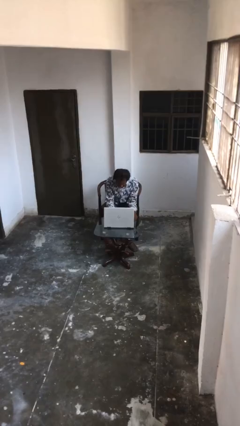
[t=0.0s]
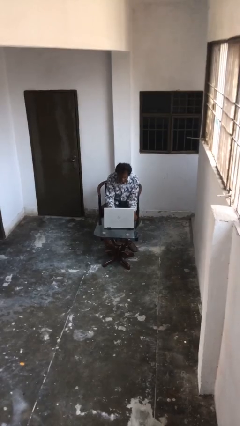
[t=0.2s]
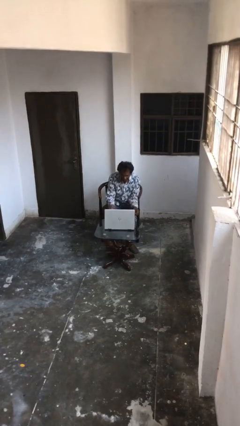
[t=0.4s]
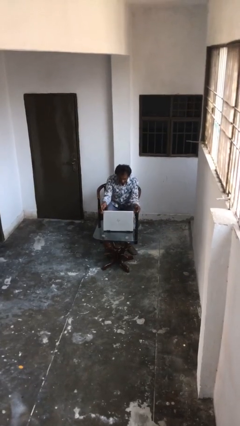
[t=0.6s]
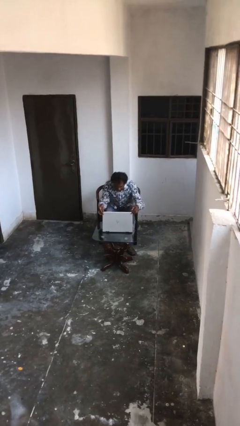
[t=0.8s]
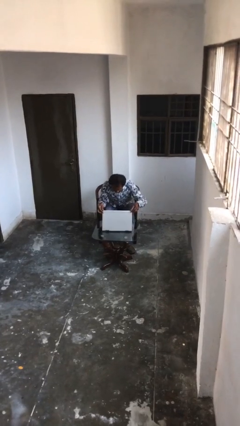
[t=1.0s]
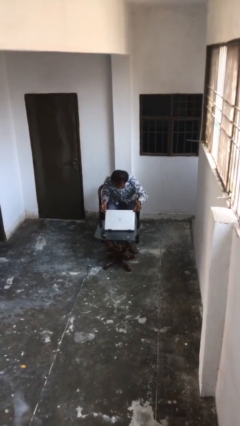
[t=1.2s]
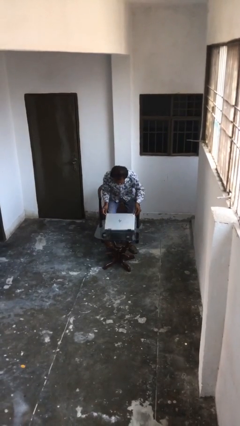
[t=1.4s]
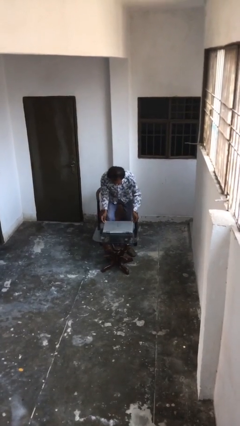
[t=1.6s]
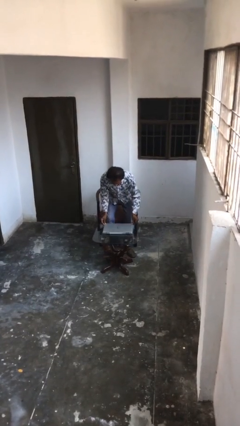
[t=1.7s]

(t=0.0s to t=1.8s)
person stands up

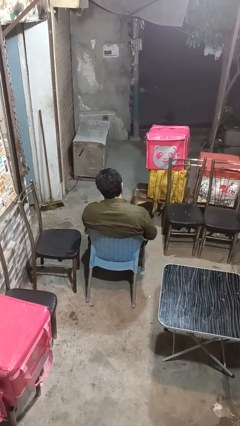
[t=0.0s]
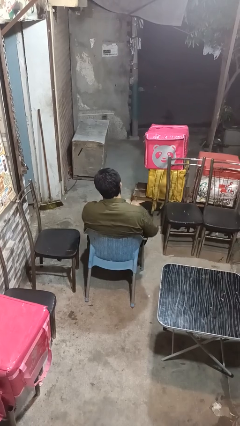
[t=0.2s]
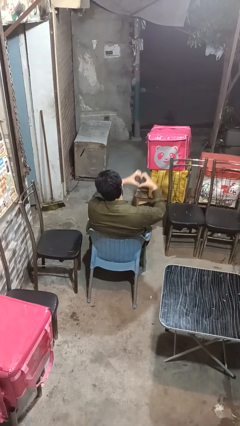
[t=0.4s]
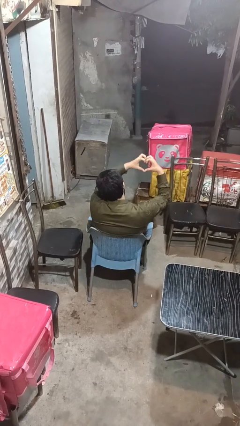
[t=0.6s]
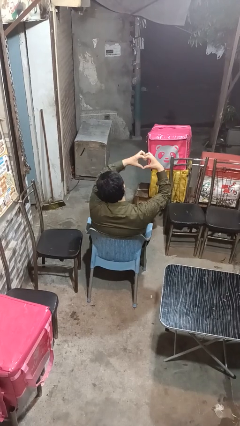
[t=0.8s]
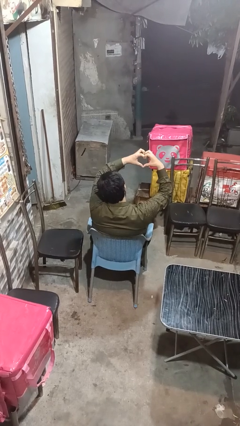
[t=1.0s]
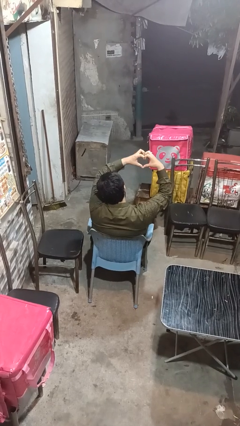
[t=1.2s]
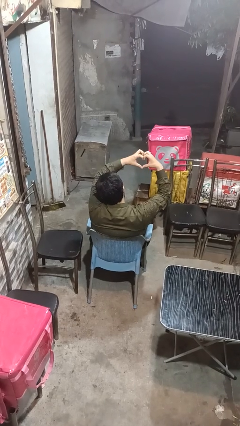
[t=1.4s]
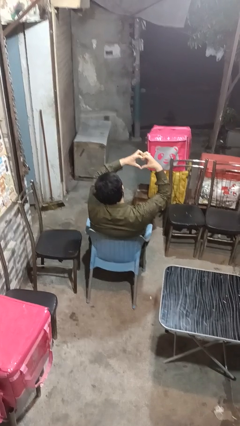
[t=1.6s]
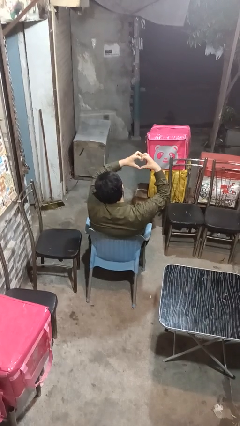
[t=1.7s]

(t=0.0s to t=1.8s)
person gestures heart

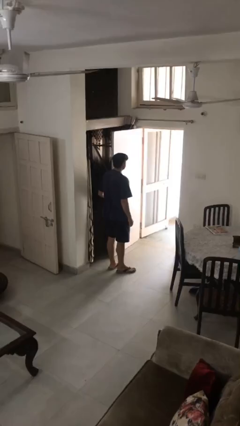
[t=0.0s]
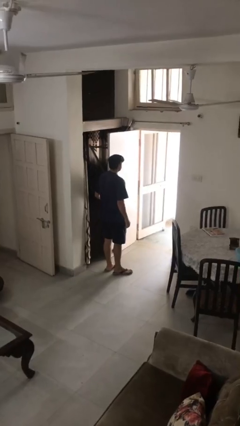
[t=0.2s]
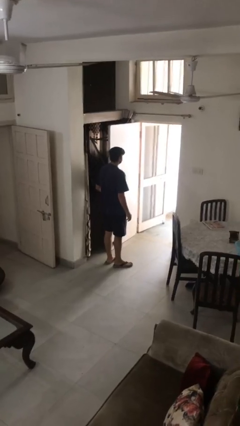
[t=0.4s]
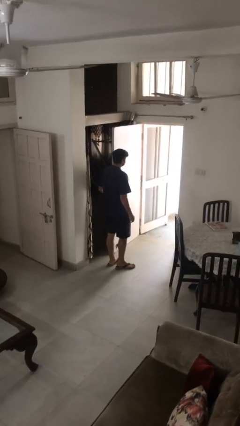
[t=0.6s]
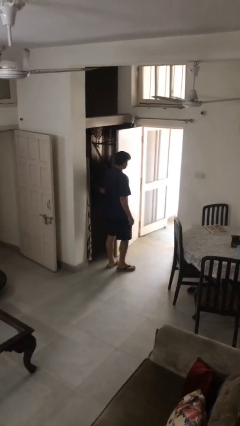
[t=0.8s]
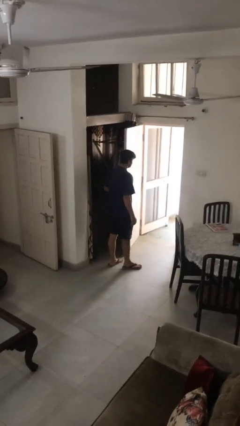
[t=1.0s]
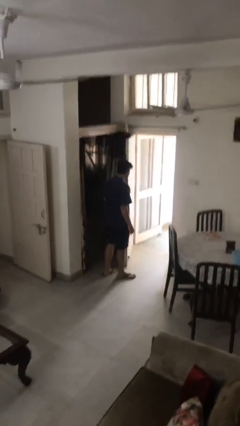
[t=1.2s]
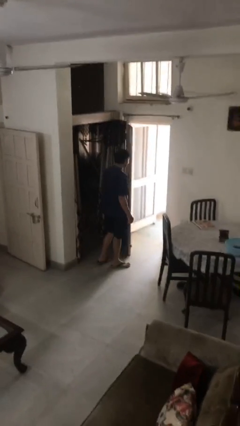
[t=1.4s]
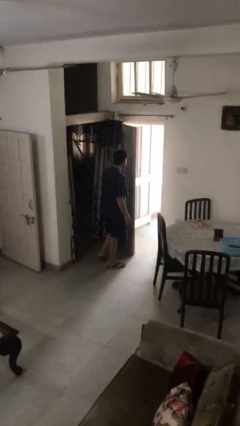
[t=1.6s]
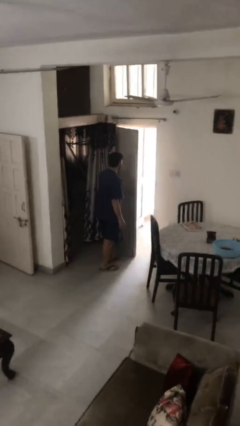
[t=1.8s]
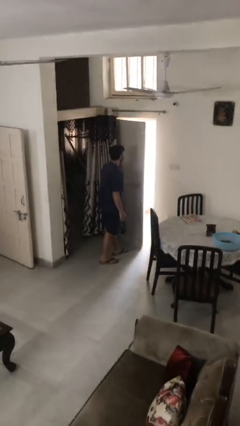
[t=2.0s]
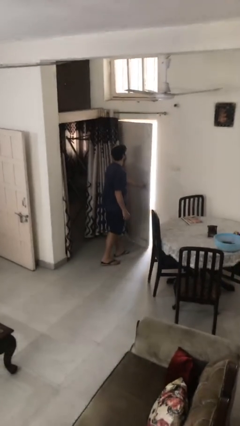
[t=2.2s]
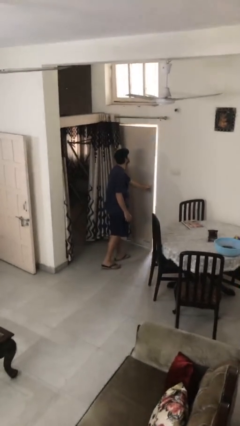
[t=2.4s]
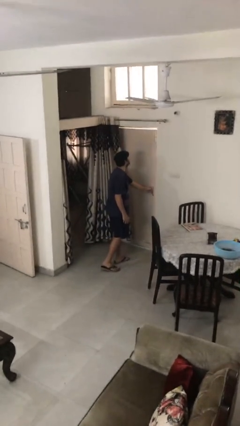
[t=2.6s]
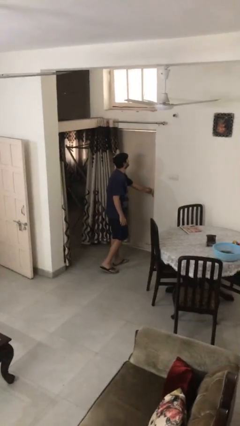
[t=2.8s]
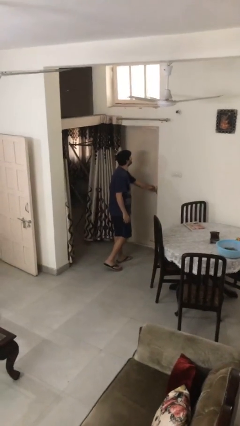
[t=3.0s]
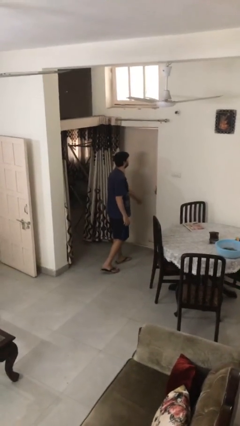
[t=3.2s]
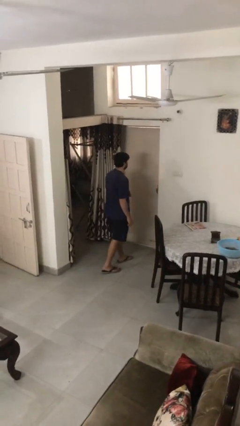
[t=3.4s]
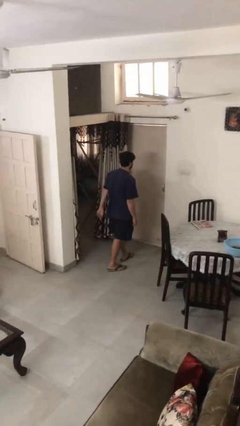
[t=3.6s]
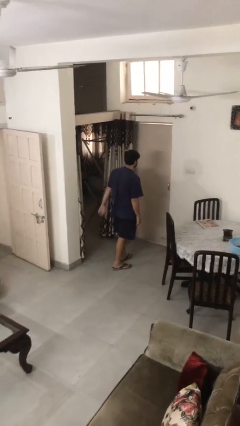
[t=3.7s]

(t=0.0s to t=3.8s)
person closes facility door

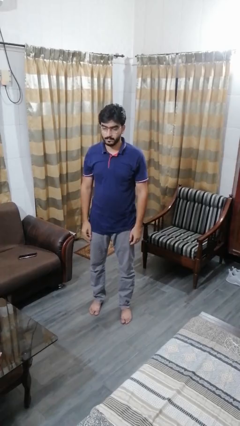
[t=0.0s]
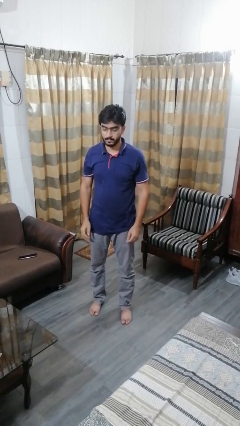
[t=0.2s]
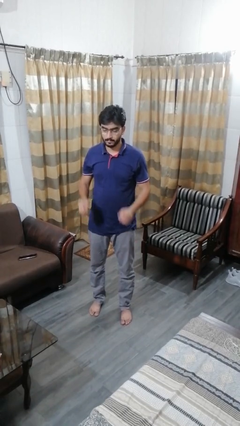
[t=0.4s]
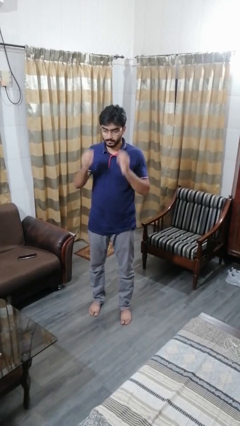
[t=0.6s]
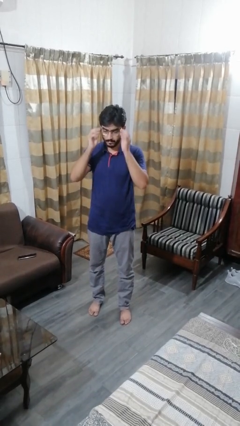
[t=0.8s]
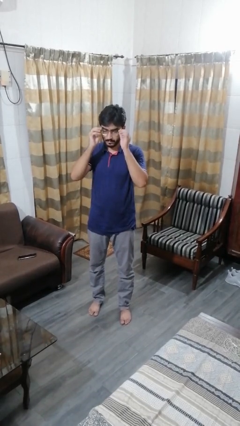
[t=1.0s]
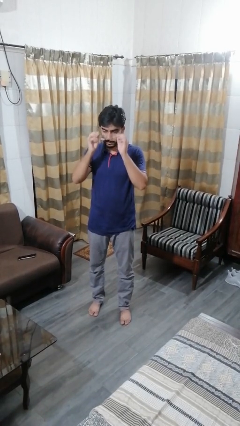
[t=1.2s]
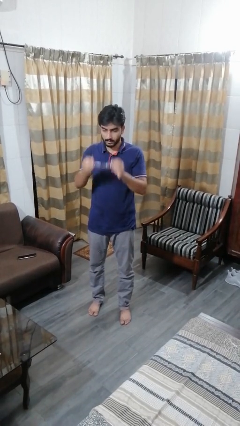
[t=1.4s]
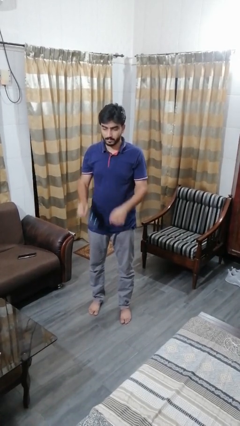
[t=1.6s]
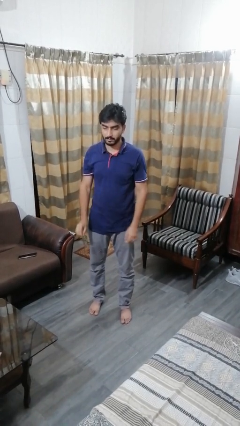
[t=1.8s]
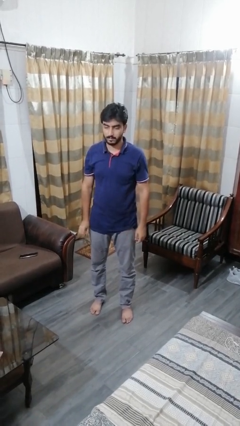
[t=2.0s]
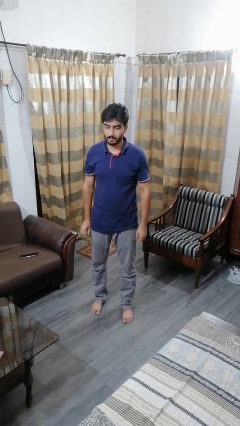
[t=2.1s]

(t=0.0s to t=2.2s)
person takes off glasses

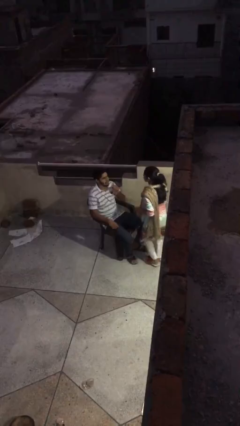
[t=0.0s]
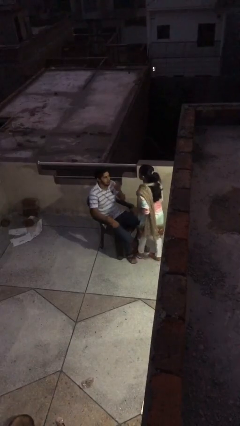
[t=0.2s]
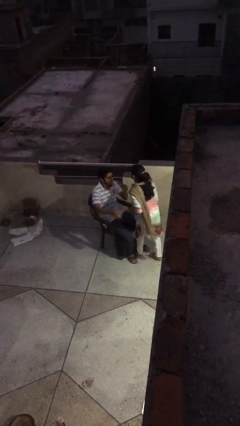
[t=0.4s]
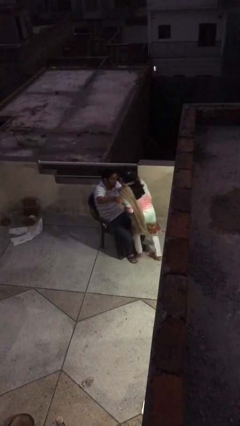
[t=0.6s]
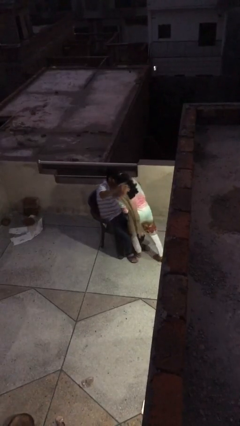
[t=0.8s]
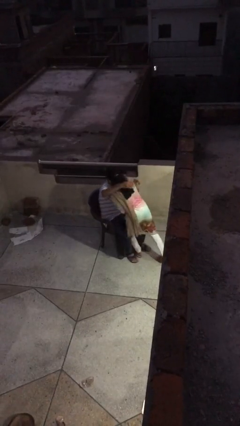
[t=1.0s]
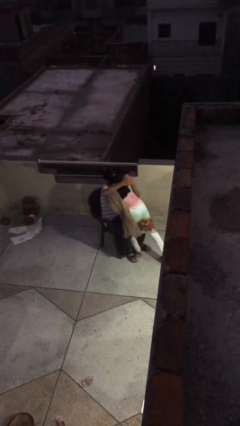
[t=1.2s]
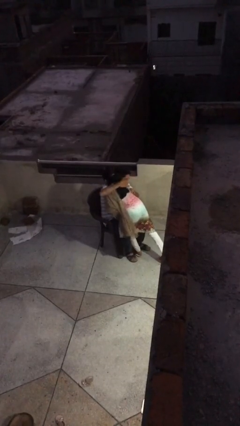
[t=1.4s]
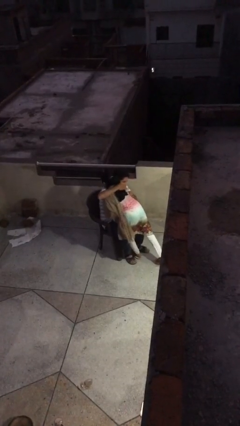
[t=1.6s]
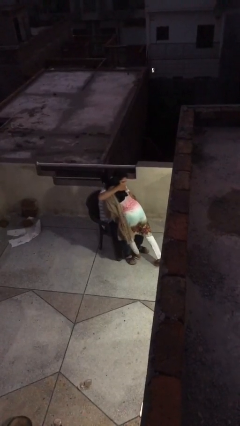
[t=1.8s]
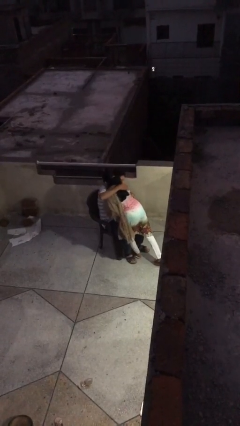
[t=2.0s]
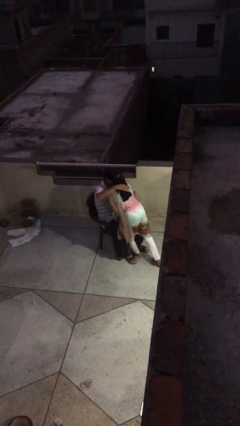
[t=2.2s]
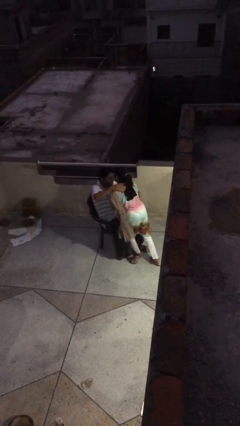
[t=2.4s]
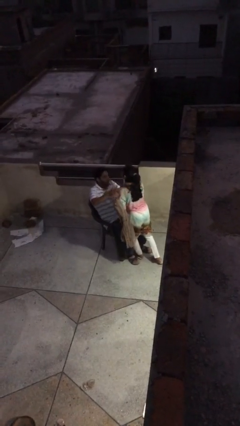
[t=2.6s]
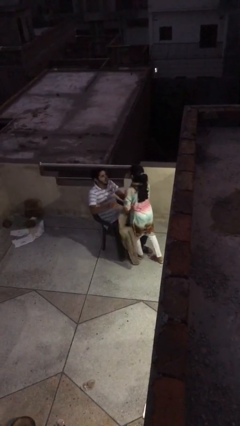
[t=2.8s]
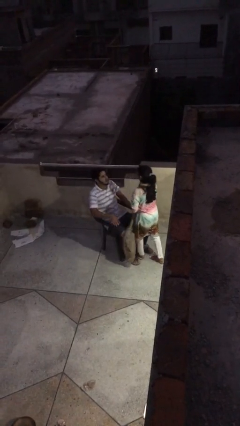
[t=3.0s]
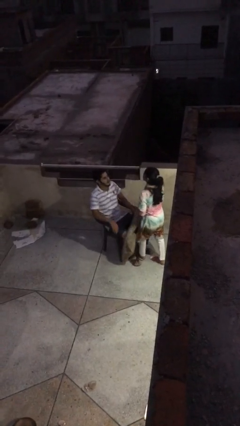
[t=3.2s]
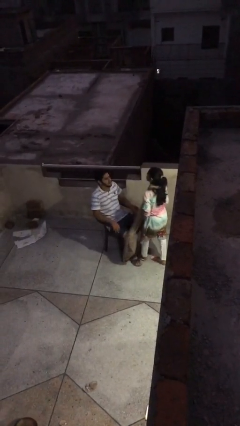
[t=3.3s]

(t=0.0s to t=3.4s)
person embraces person

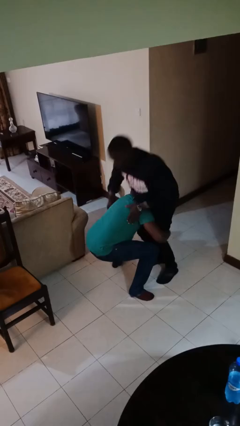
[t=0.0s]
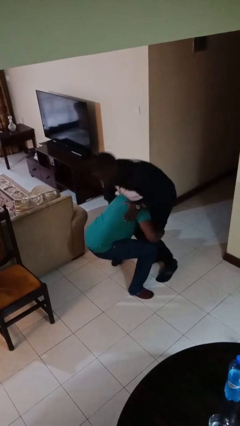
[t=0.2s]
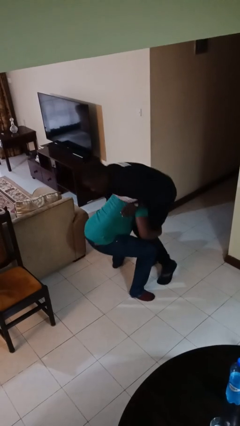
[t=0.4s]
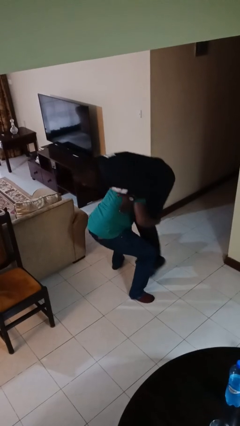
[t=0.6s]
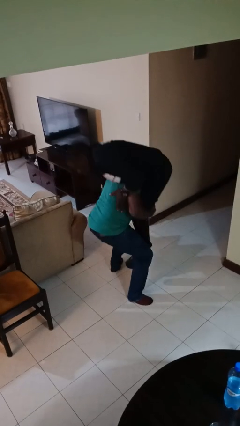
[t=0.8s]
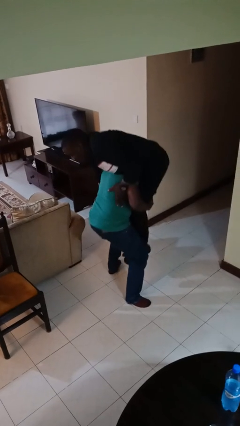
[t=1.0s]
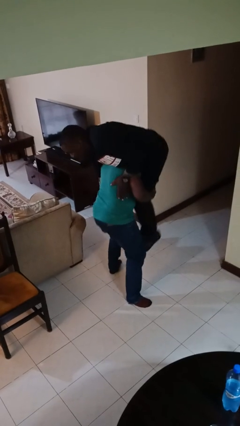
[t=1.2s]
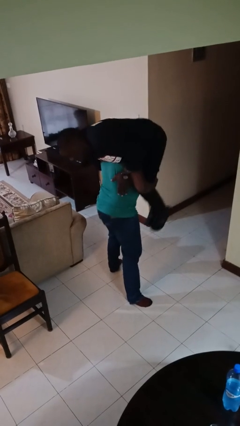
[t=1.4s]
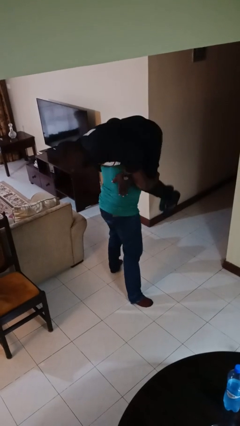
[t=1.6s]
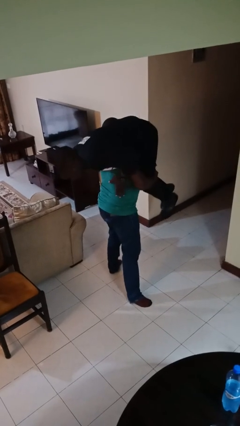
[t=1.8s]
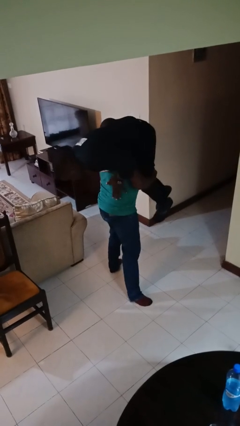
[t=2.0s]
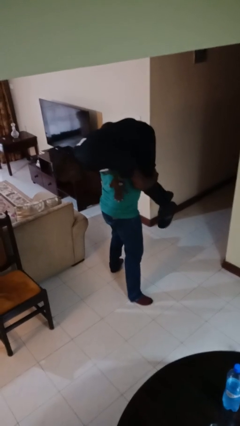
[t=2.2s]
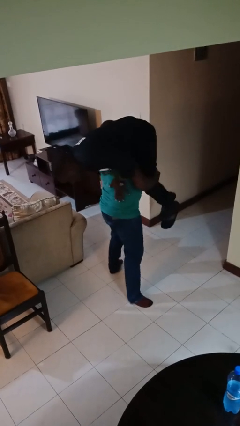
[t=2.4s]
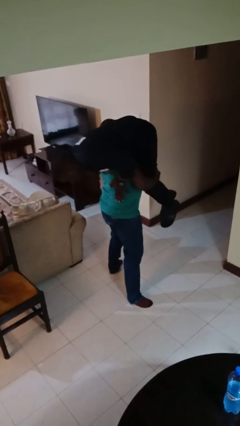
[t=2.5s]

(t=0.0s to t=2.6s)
person carries person over shoulder

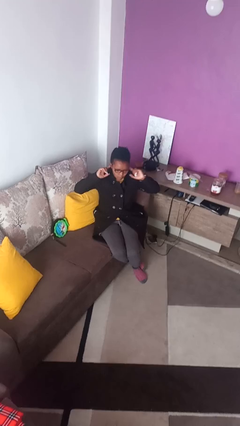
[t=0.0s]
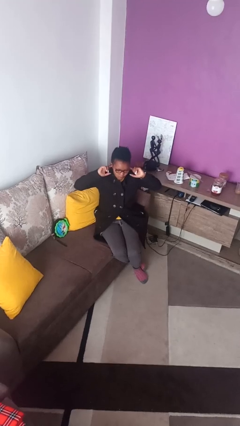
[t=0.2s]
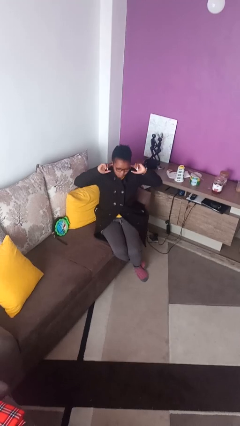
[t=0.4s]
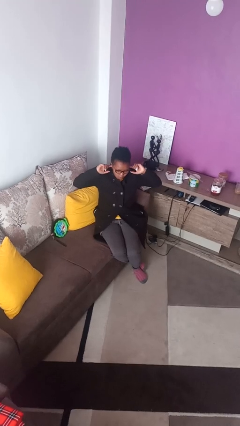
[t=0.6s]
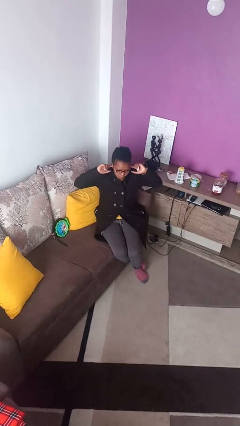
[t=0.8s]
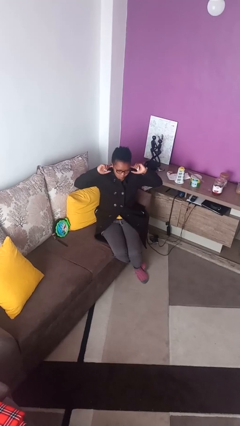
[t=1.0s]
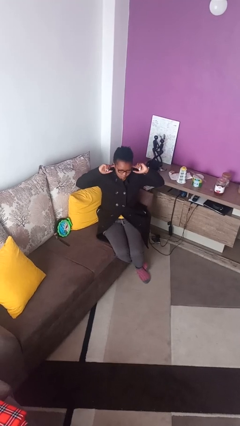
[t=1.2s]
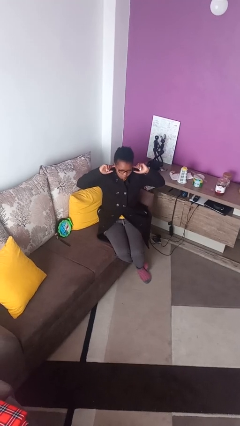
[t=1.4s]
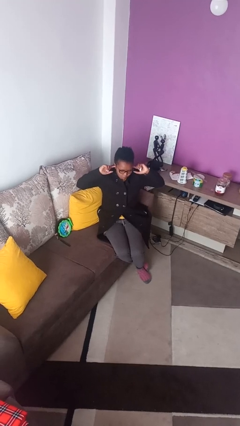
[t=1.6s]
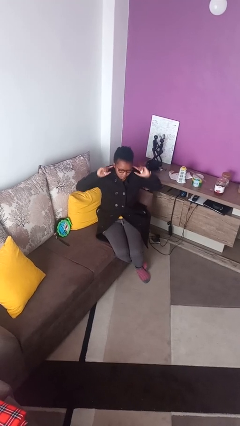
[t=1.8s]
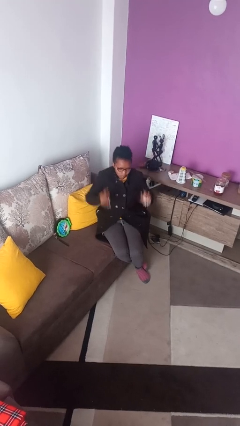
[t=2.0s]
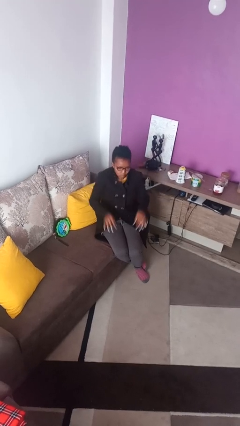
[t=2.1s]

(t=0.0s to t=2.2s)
person puts fingers in ear
